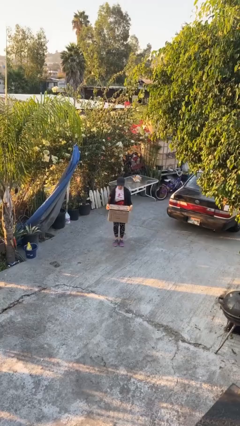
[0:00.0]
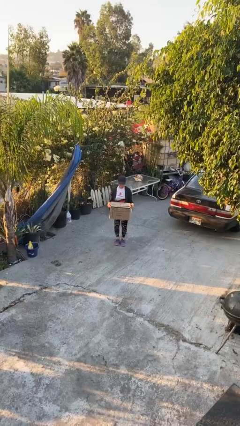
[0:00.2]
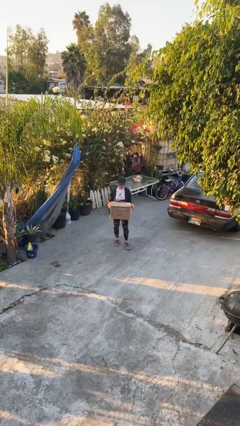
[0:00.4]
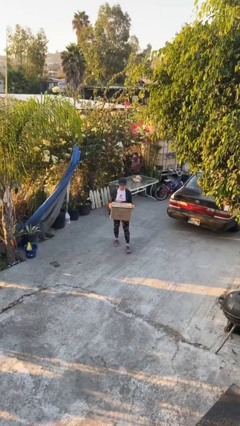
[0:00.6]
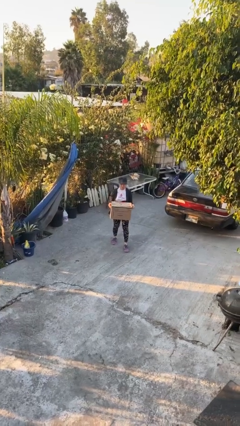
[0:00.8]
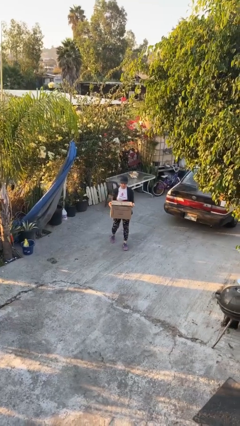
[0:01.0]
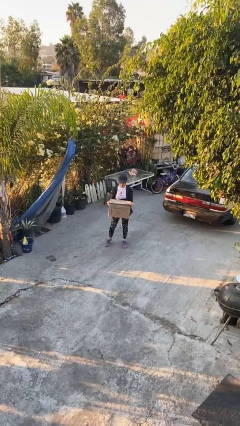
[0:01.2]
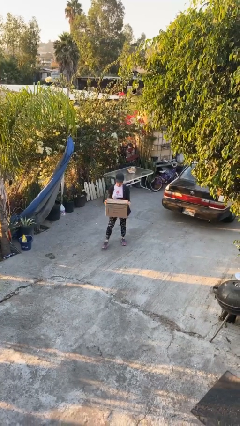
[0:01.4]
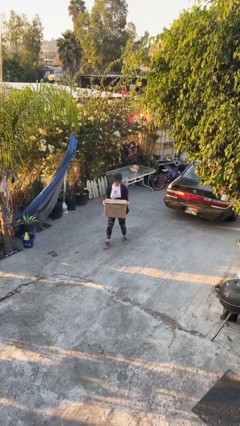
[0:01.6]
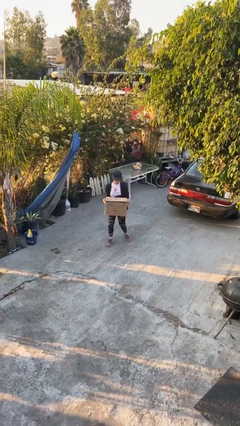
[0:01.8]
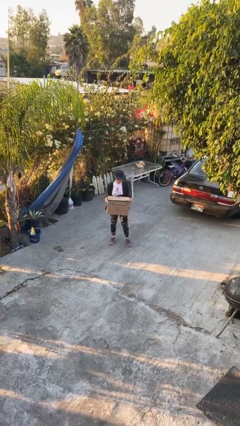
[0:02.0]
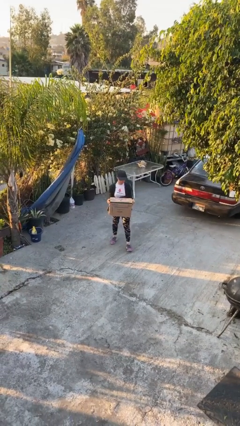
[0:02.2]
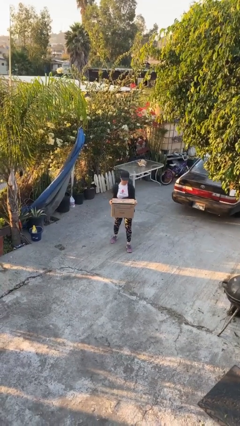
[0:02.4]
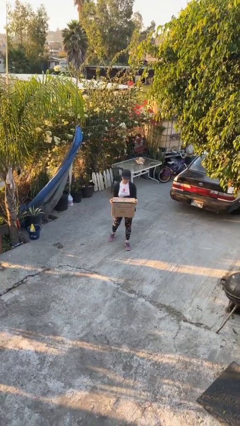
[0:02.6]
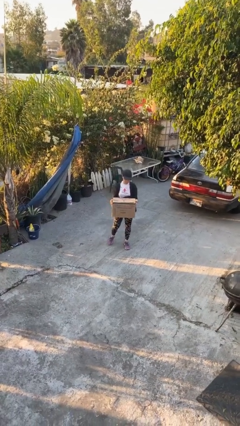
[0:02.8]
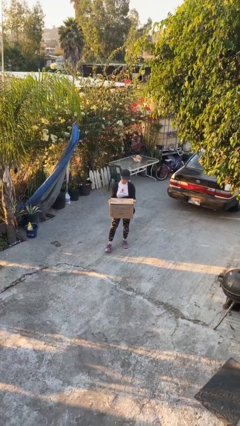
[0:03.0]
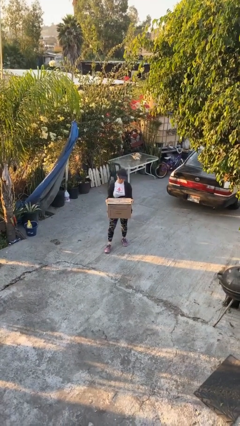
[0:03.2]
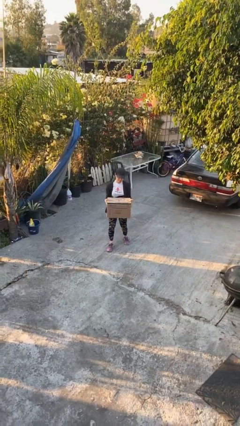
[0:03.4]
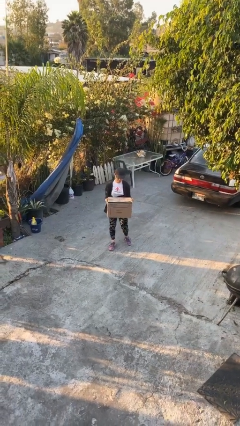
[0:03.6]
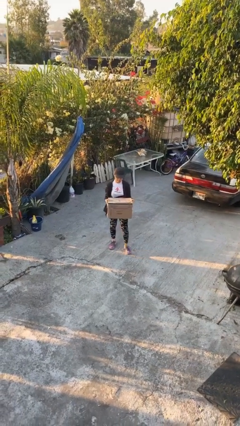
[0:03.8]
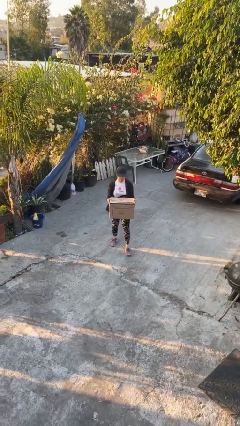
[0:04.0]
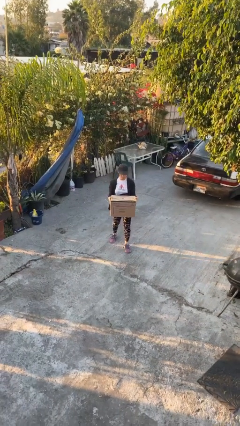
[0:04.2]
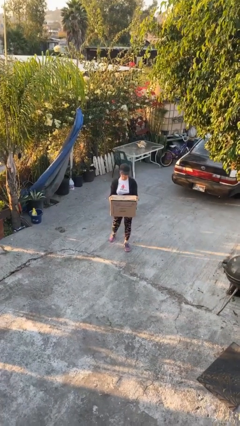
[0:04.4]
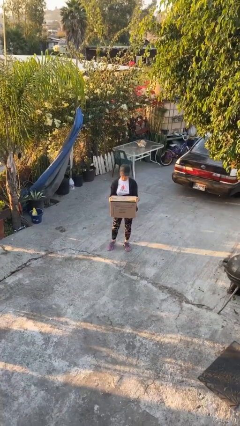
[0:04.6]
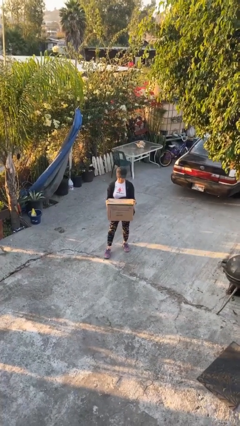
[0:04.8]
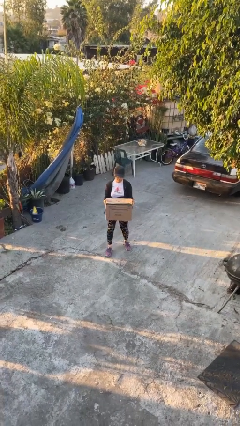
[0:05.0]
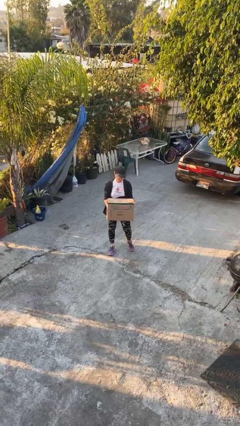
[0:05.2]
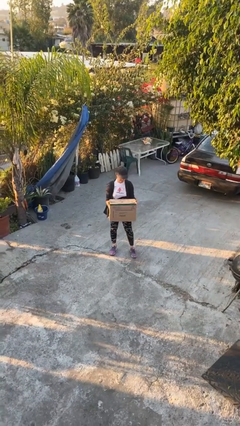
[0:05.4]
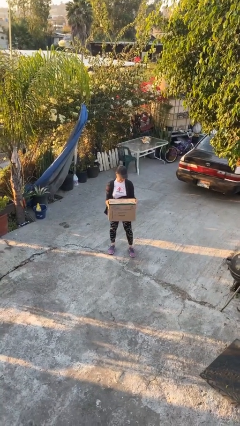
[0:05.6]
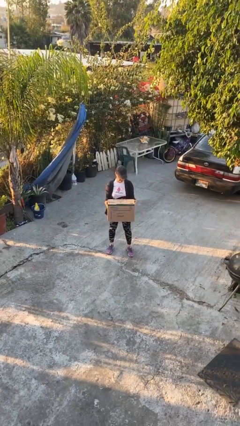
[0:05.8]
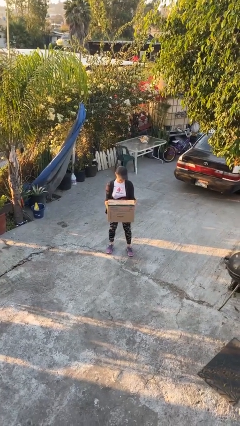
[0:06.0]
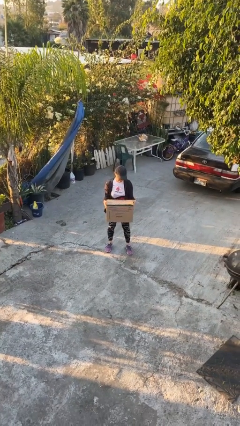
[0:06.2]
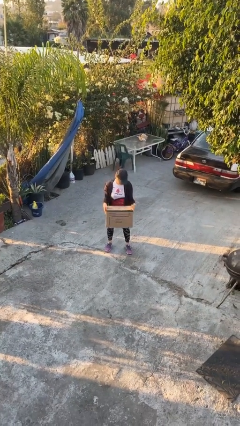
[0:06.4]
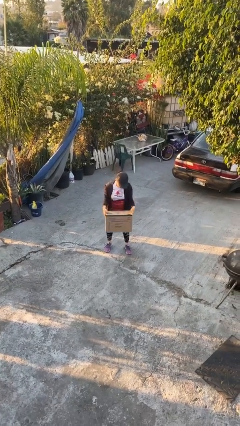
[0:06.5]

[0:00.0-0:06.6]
person carries heavy object

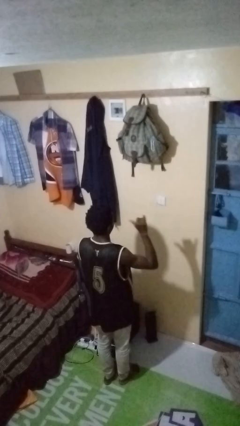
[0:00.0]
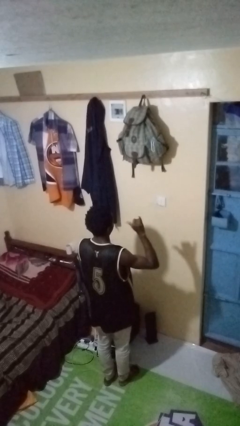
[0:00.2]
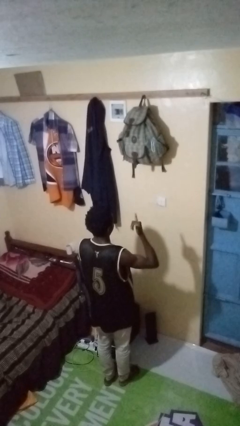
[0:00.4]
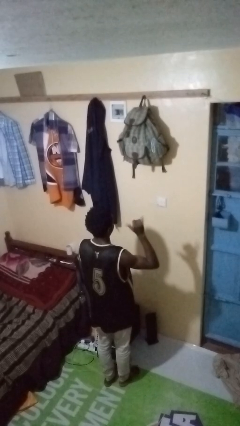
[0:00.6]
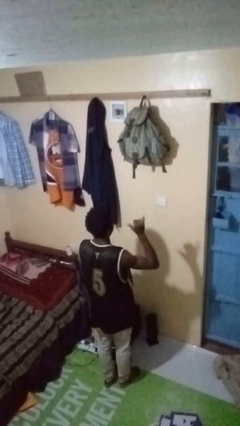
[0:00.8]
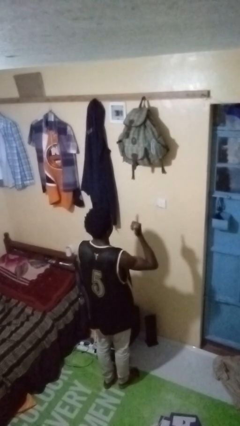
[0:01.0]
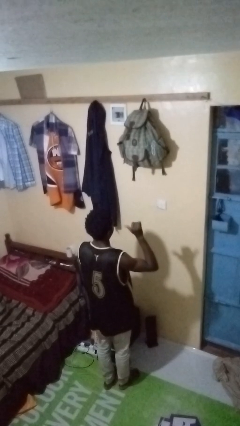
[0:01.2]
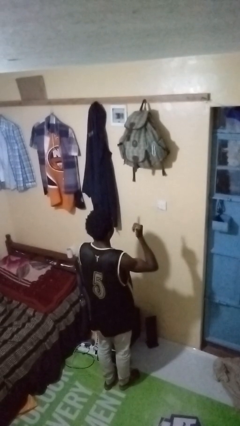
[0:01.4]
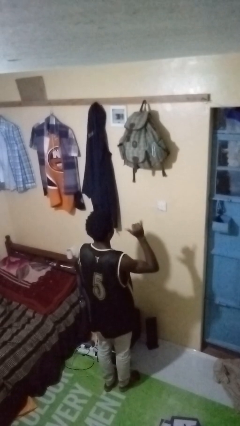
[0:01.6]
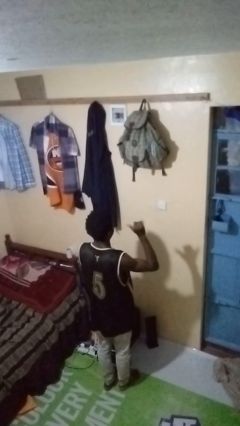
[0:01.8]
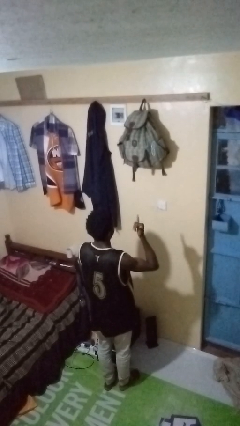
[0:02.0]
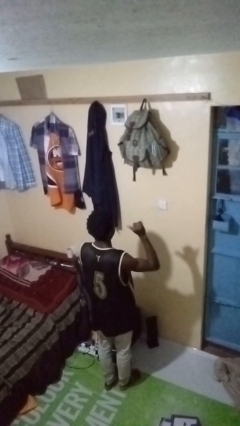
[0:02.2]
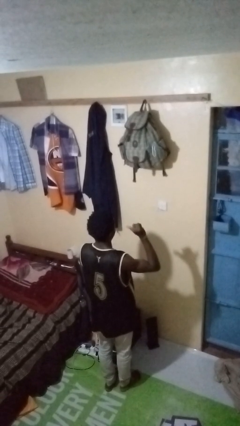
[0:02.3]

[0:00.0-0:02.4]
person gestures hang loose

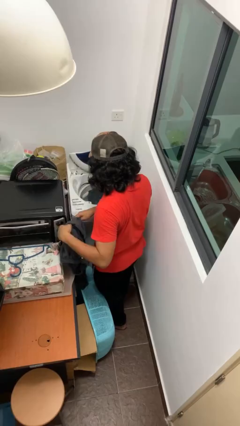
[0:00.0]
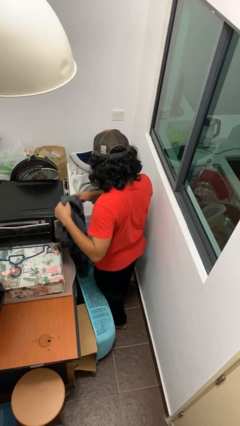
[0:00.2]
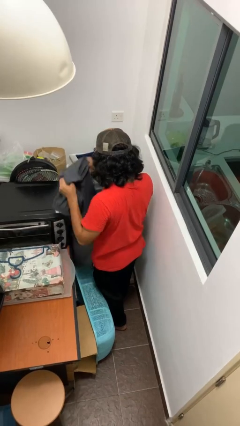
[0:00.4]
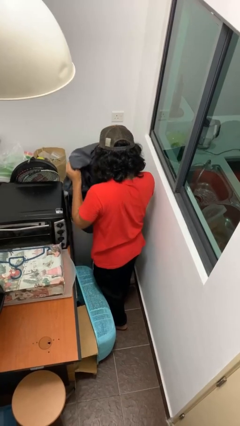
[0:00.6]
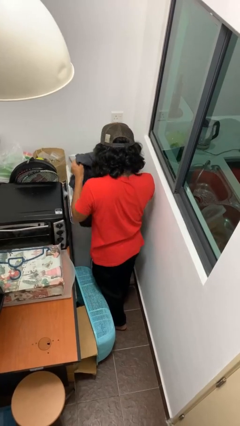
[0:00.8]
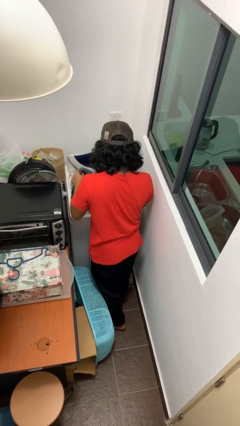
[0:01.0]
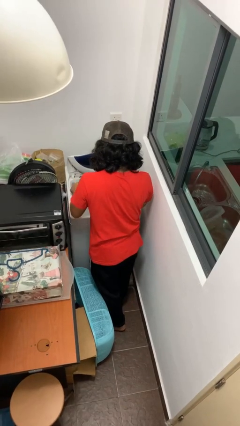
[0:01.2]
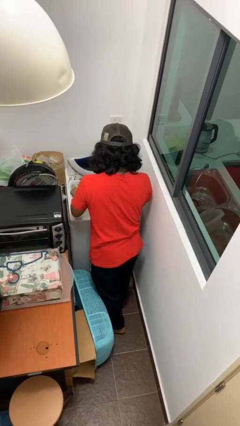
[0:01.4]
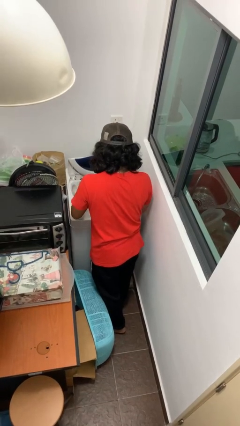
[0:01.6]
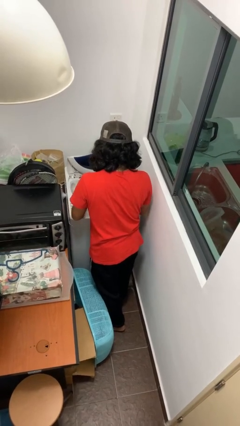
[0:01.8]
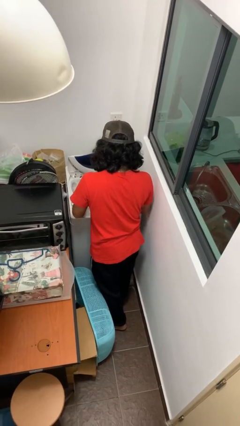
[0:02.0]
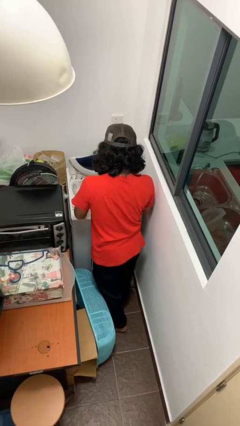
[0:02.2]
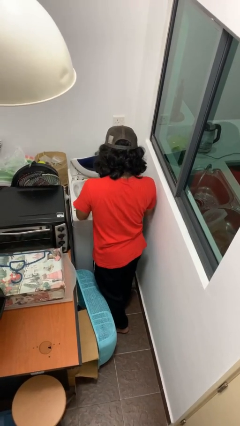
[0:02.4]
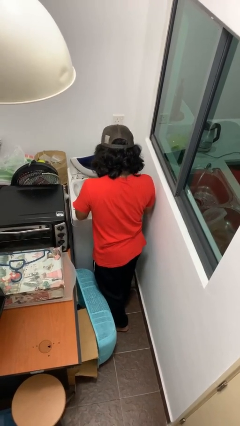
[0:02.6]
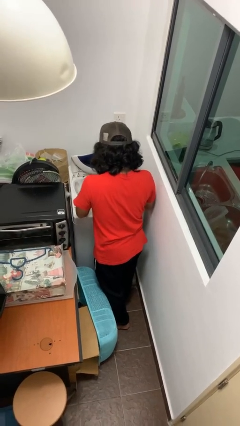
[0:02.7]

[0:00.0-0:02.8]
person loads clotheswasher

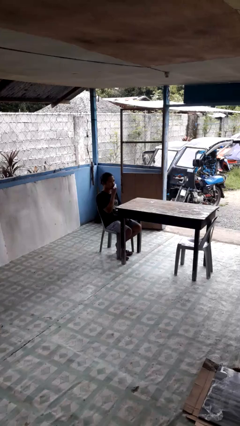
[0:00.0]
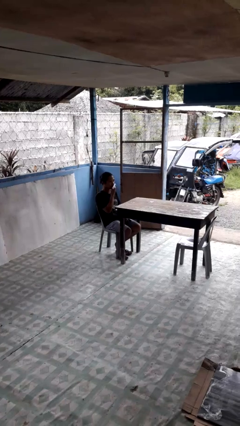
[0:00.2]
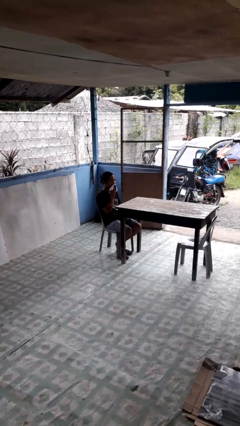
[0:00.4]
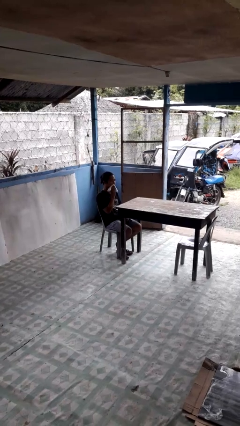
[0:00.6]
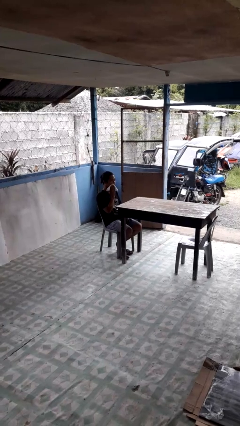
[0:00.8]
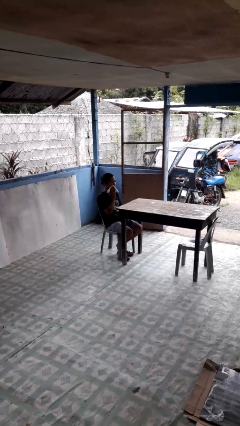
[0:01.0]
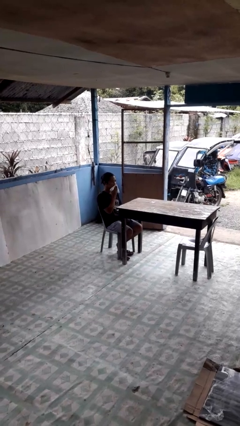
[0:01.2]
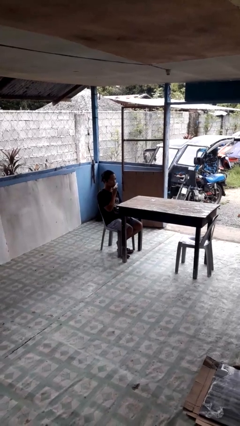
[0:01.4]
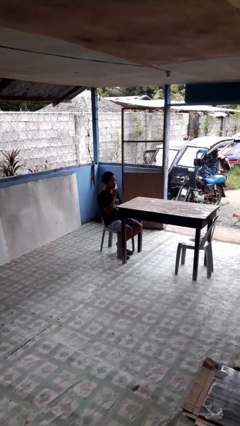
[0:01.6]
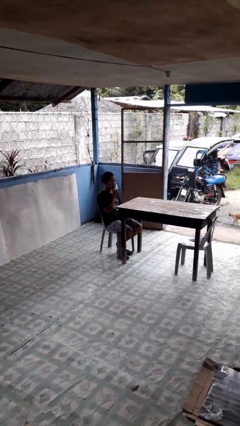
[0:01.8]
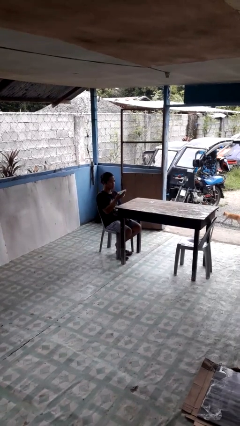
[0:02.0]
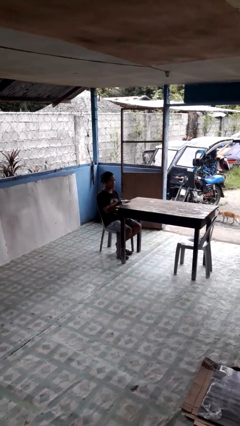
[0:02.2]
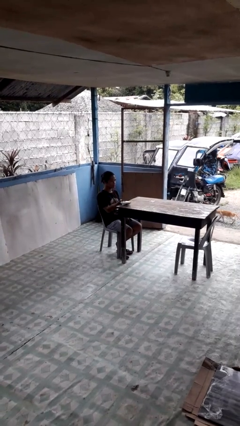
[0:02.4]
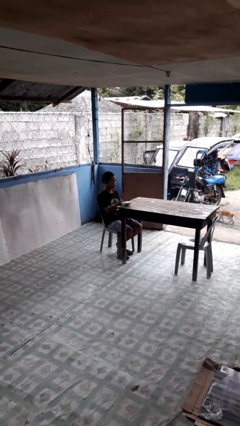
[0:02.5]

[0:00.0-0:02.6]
person wipes mouth with napkin

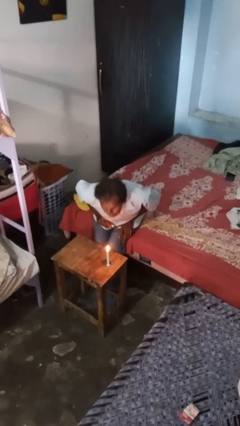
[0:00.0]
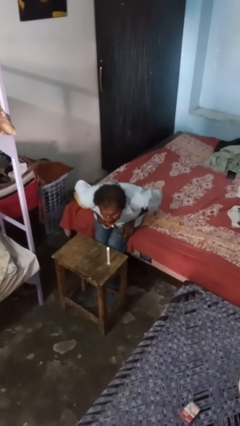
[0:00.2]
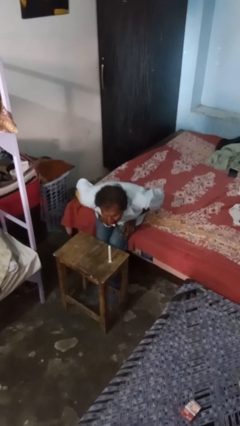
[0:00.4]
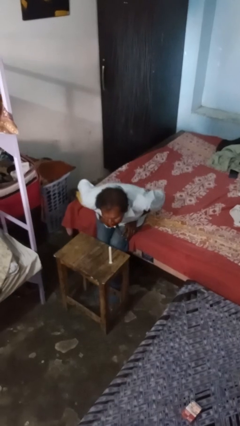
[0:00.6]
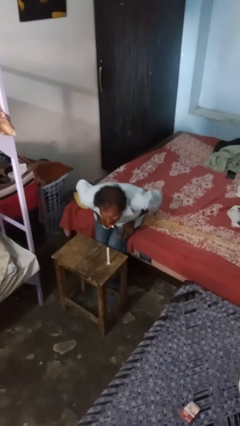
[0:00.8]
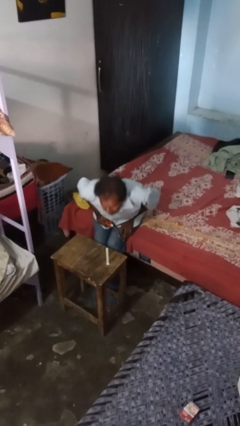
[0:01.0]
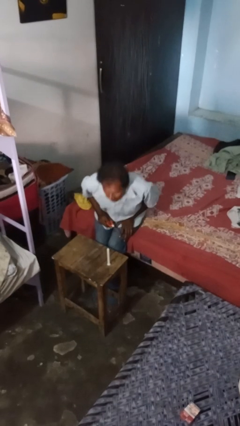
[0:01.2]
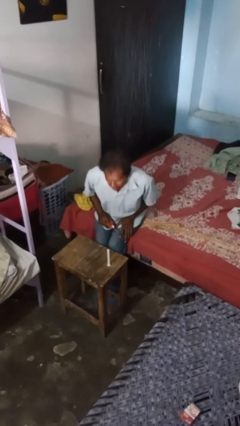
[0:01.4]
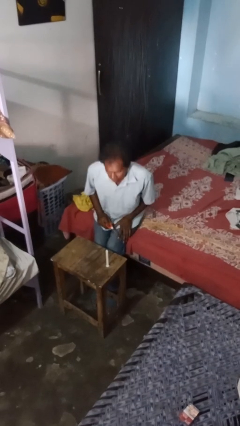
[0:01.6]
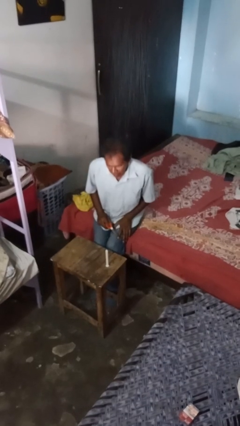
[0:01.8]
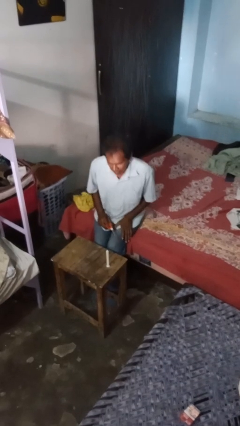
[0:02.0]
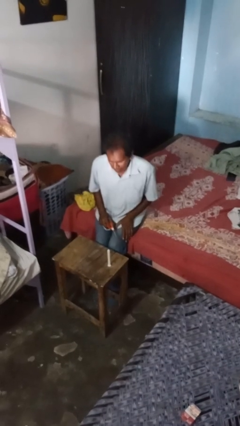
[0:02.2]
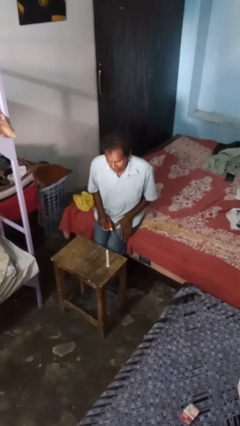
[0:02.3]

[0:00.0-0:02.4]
person extinguishes candle

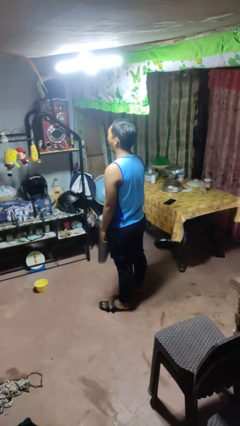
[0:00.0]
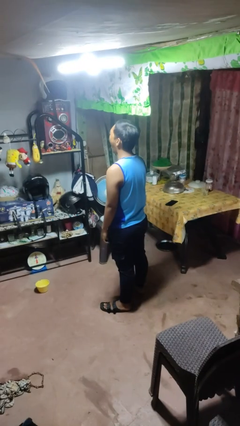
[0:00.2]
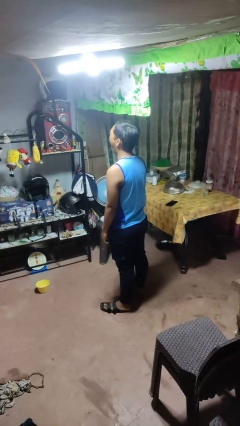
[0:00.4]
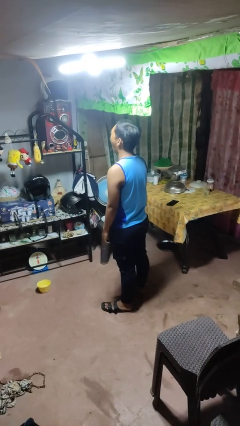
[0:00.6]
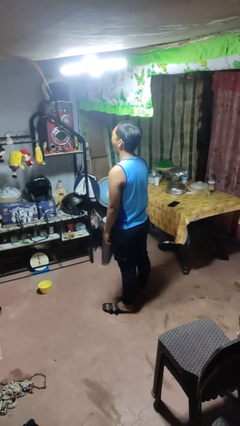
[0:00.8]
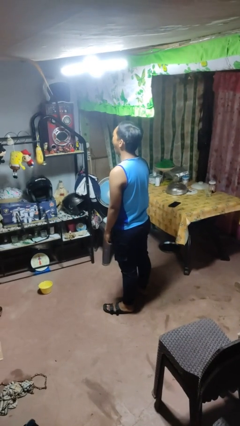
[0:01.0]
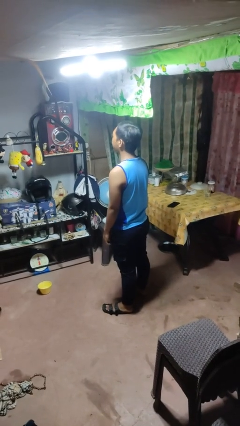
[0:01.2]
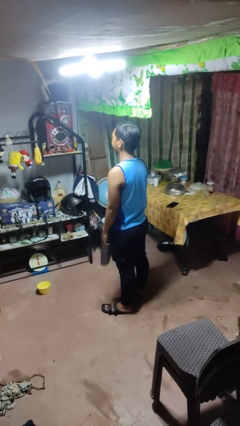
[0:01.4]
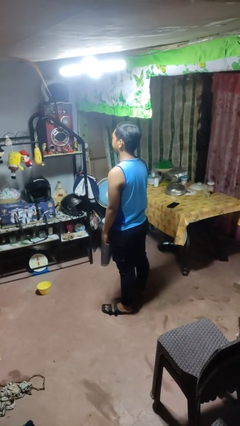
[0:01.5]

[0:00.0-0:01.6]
person yawns
